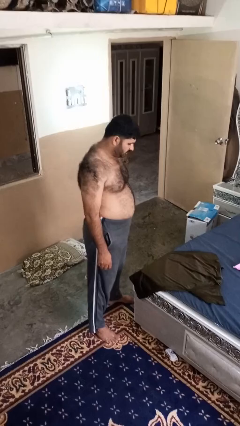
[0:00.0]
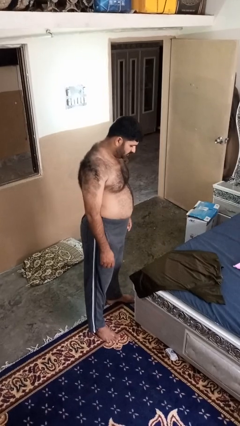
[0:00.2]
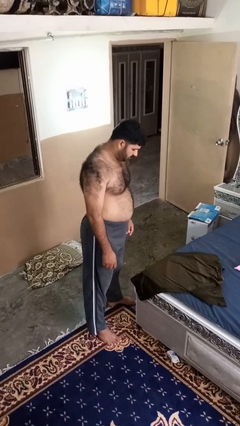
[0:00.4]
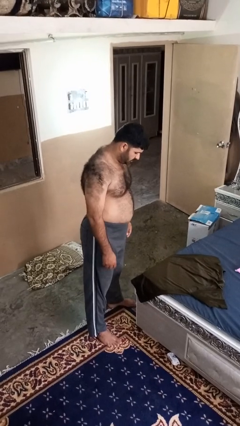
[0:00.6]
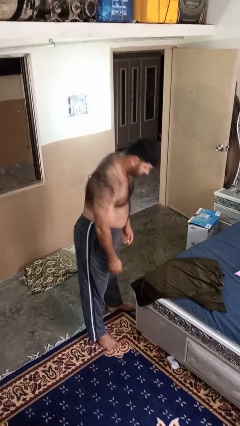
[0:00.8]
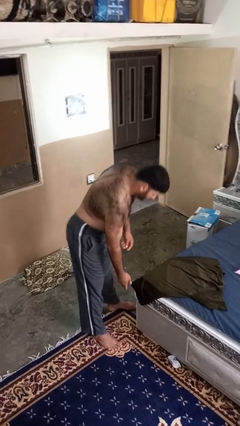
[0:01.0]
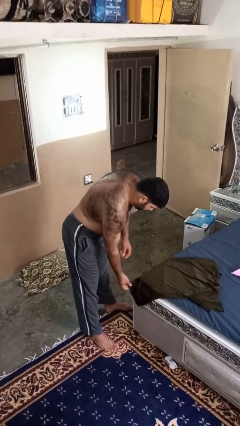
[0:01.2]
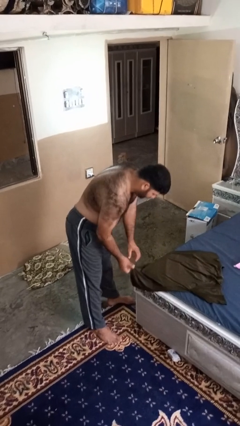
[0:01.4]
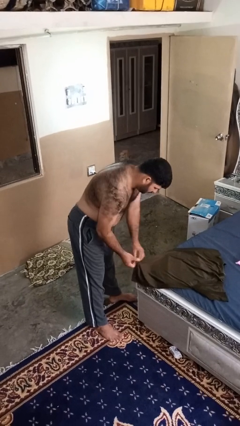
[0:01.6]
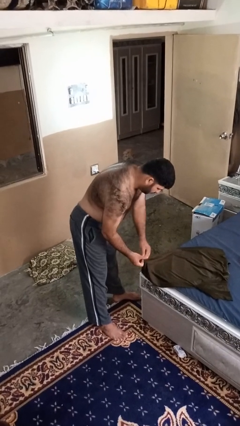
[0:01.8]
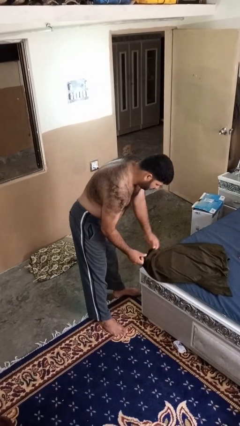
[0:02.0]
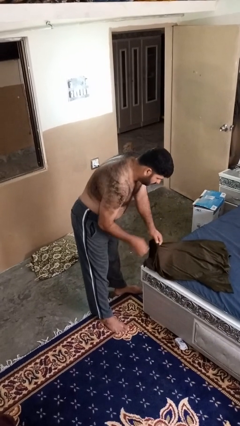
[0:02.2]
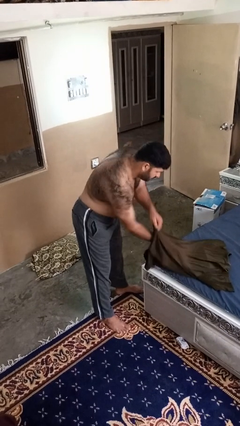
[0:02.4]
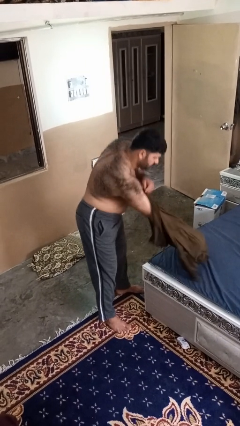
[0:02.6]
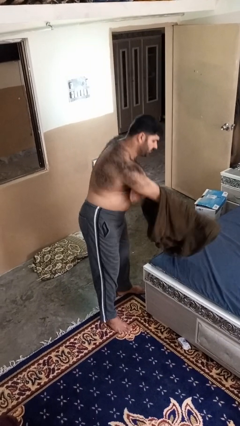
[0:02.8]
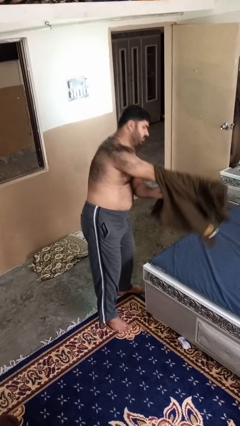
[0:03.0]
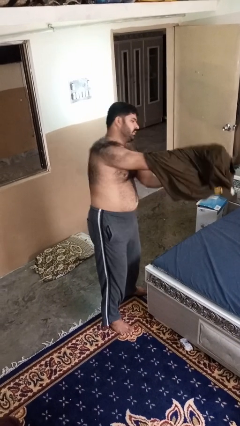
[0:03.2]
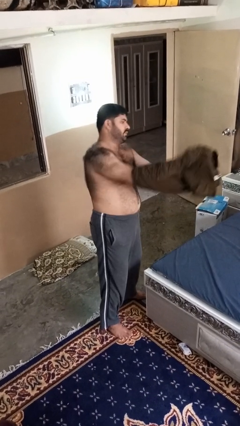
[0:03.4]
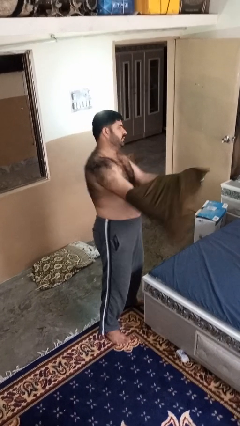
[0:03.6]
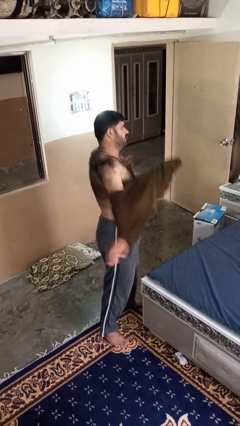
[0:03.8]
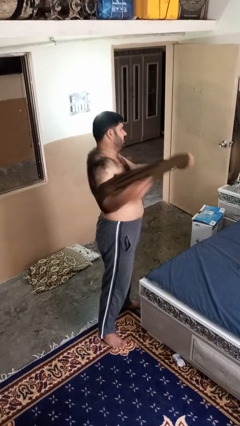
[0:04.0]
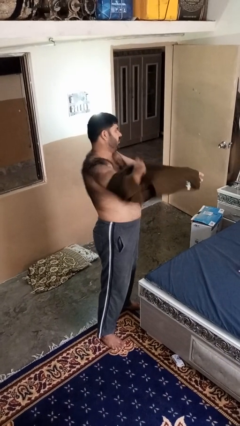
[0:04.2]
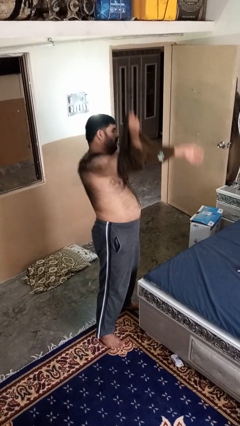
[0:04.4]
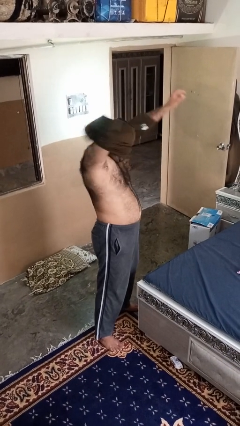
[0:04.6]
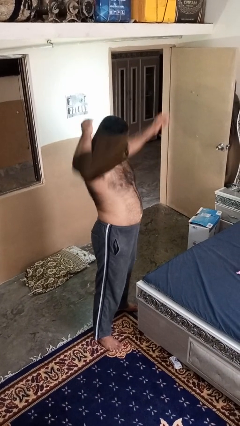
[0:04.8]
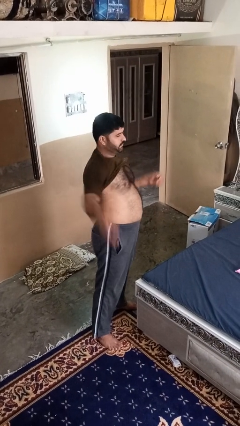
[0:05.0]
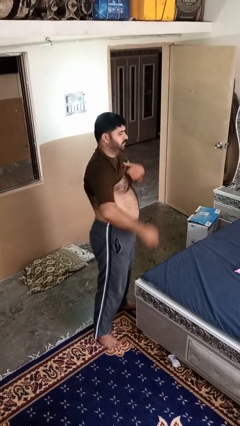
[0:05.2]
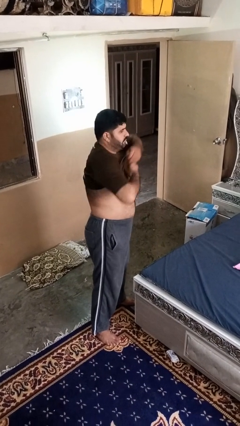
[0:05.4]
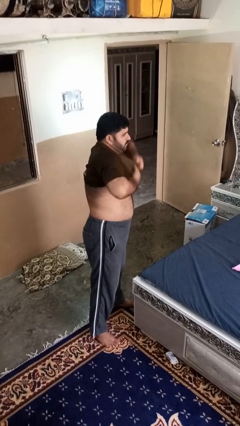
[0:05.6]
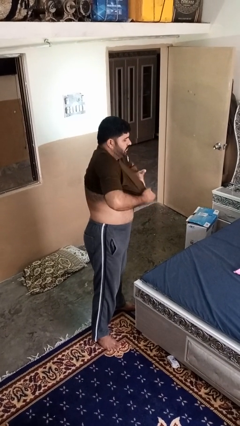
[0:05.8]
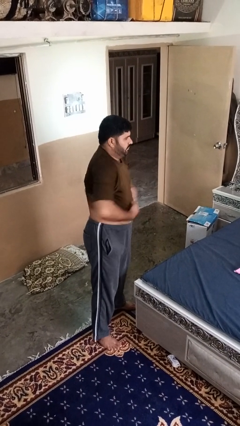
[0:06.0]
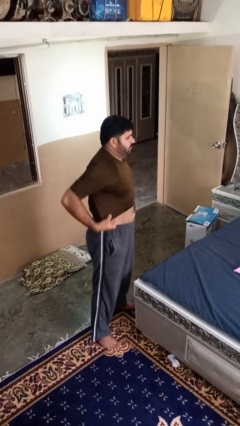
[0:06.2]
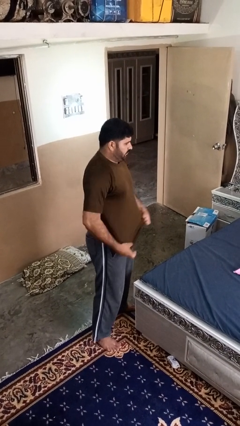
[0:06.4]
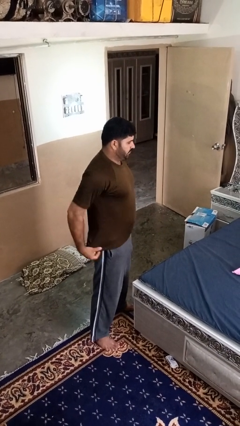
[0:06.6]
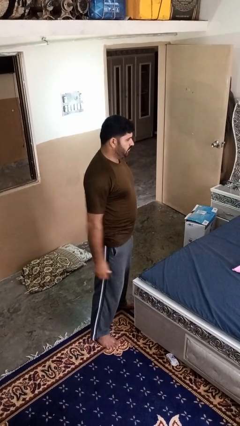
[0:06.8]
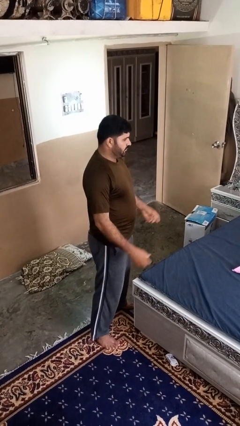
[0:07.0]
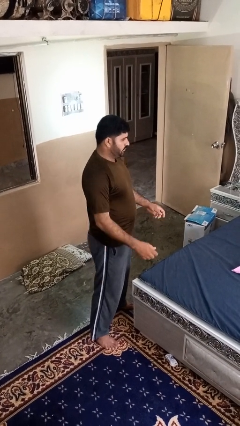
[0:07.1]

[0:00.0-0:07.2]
person puts on shirt

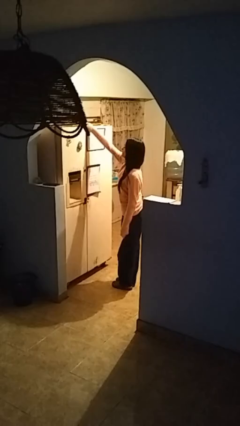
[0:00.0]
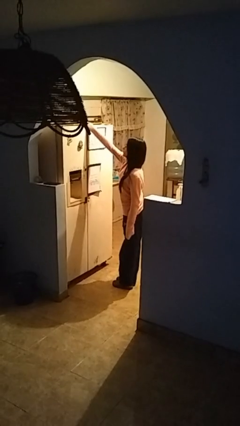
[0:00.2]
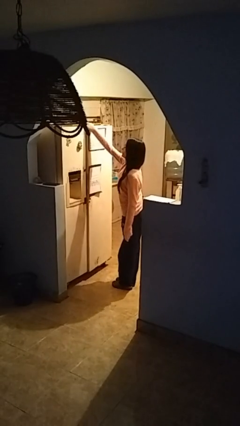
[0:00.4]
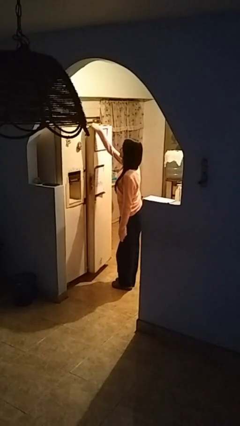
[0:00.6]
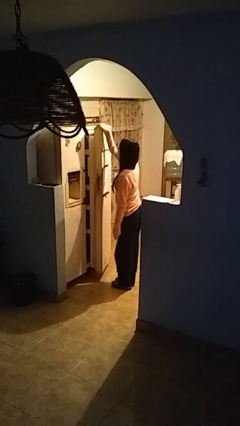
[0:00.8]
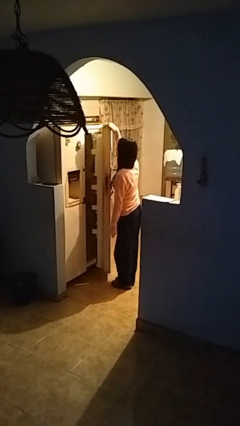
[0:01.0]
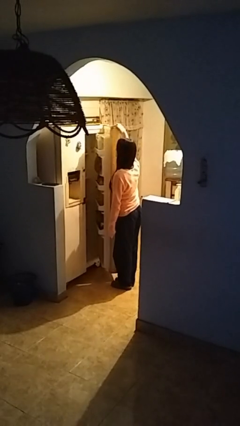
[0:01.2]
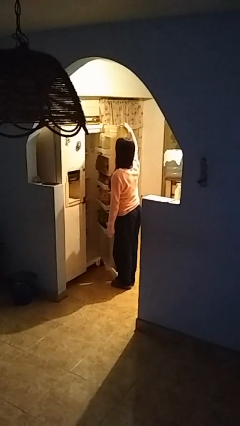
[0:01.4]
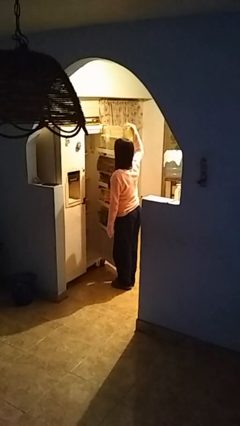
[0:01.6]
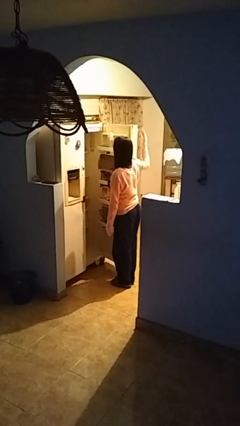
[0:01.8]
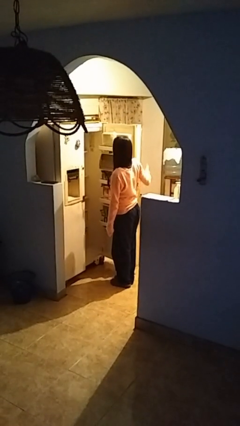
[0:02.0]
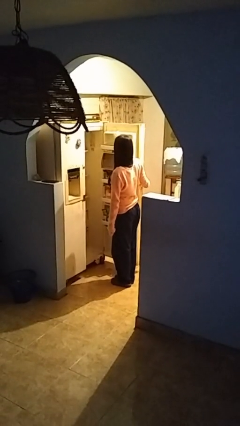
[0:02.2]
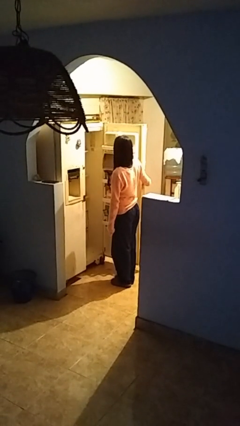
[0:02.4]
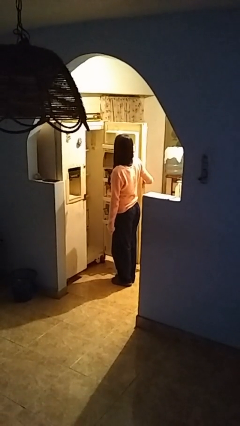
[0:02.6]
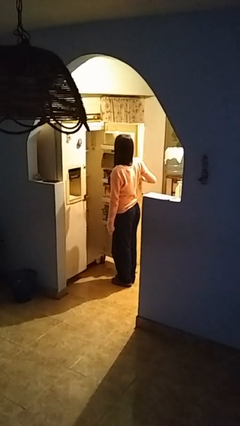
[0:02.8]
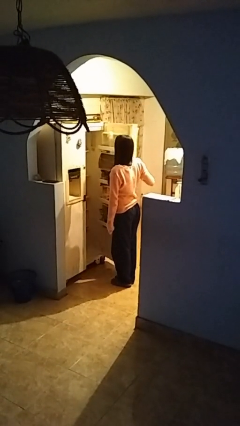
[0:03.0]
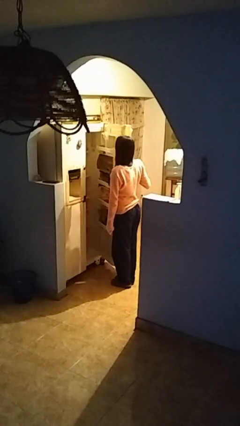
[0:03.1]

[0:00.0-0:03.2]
person opens refrigerator

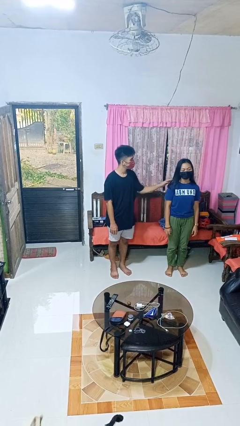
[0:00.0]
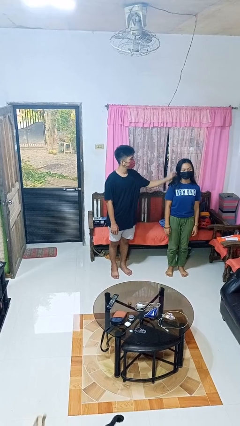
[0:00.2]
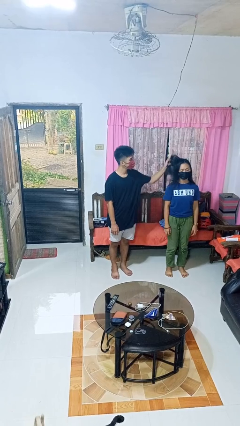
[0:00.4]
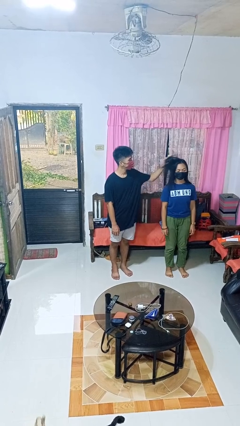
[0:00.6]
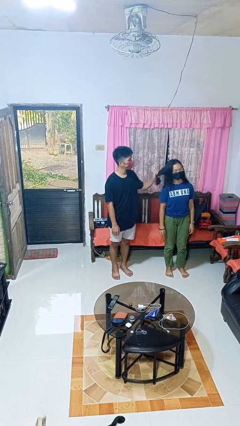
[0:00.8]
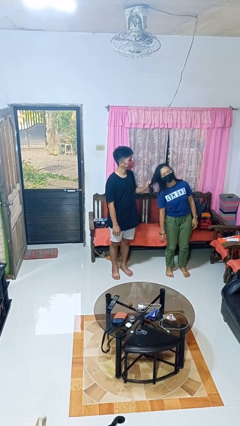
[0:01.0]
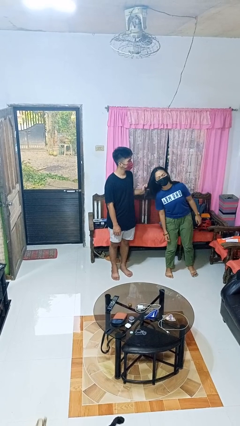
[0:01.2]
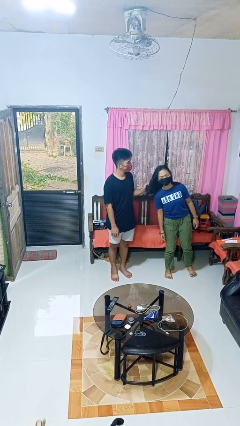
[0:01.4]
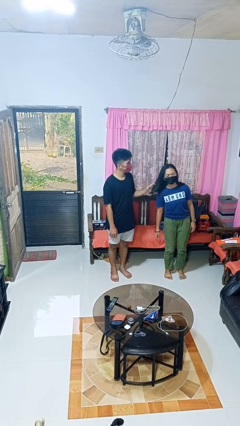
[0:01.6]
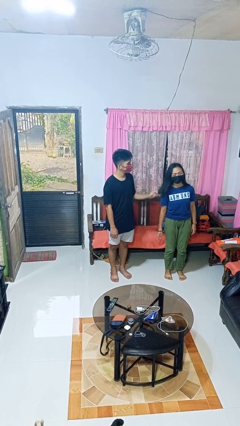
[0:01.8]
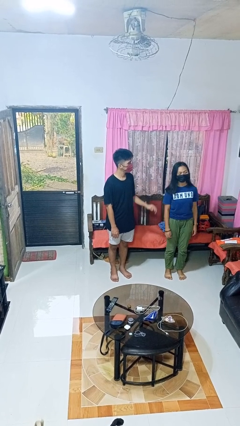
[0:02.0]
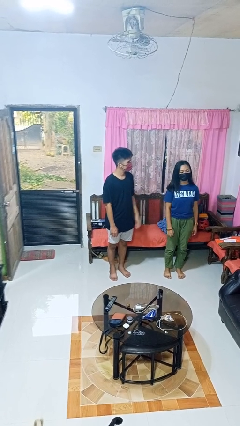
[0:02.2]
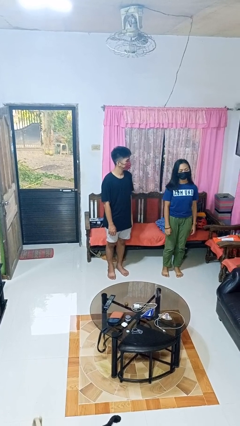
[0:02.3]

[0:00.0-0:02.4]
person grabs person by hair

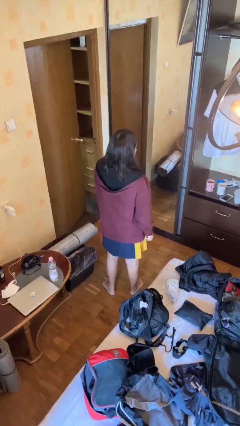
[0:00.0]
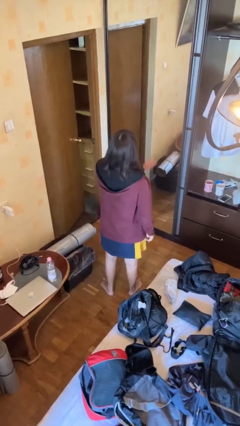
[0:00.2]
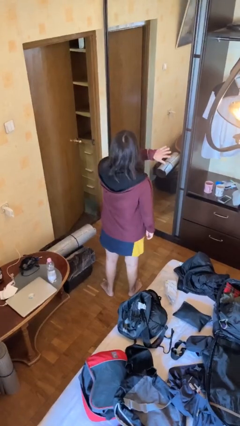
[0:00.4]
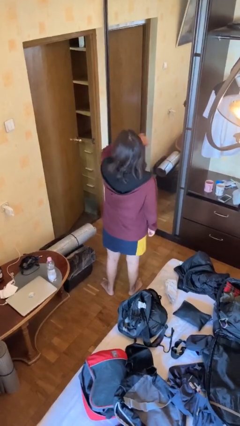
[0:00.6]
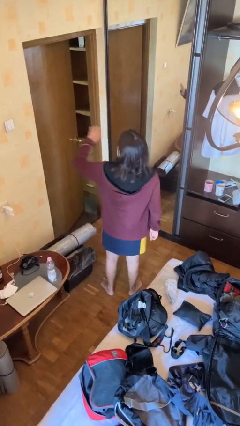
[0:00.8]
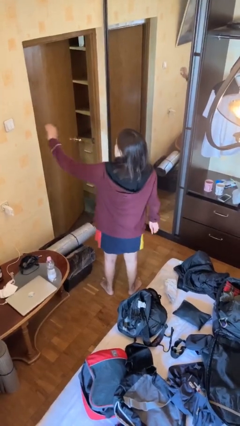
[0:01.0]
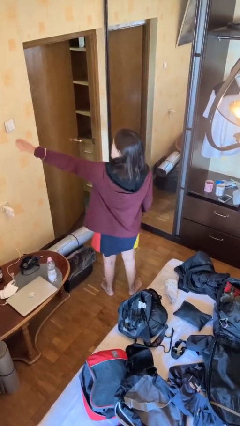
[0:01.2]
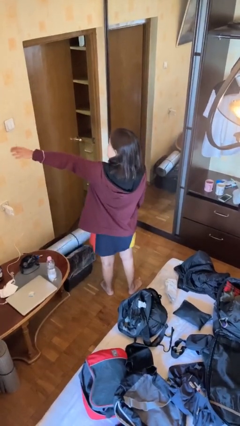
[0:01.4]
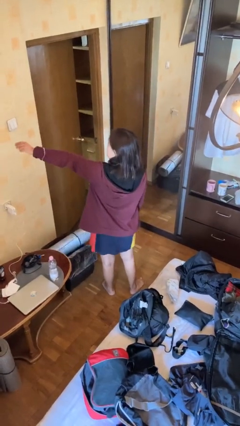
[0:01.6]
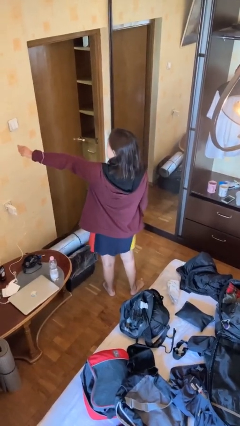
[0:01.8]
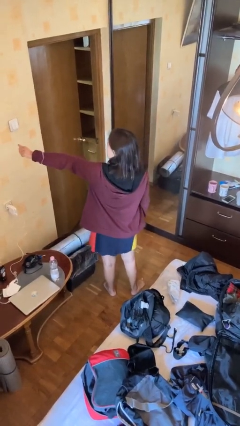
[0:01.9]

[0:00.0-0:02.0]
person gestures swipe left

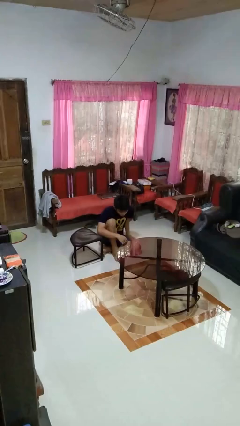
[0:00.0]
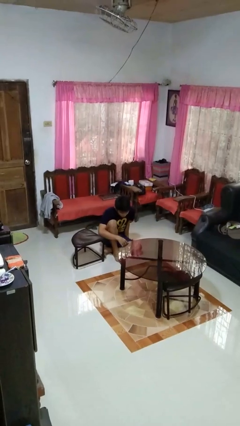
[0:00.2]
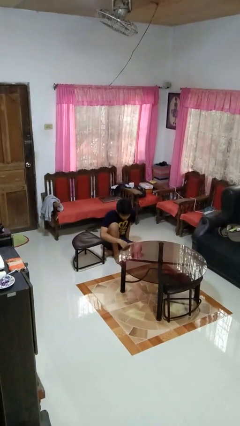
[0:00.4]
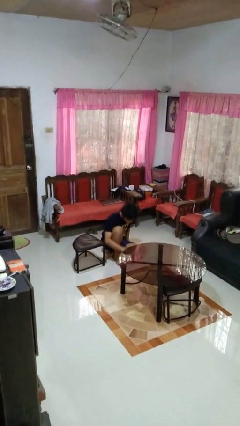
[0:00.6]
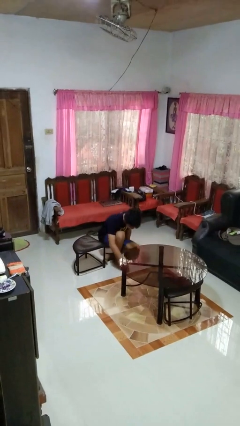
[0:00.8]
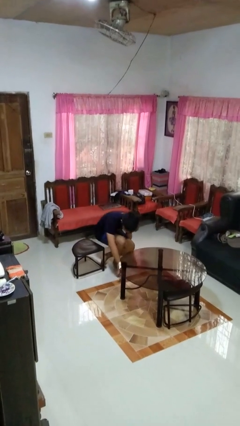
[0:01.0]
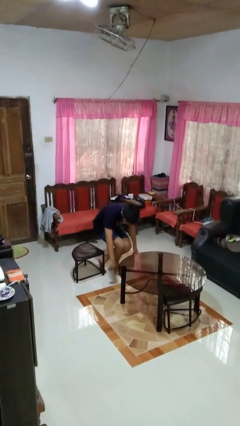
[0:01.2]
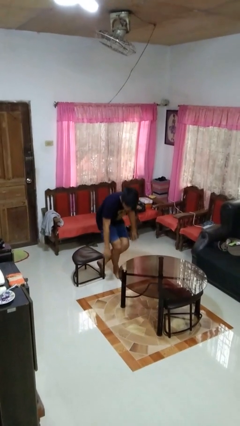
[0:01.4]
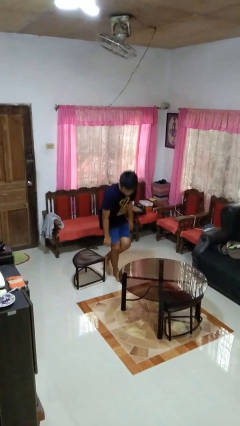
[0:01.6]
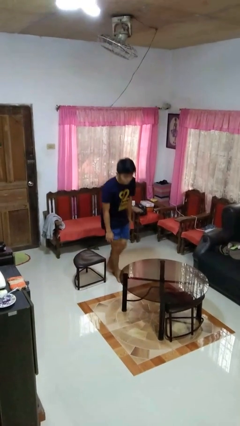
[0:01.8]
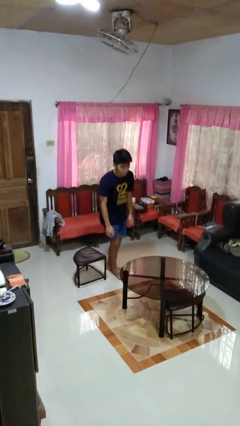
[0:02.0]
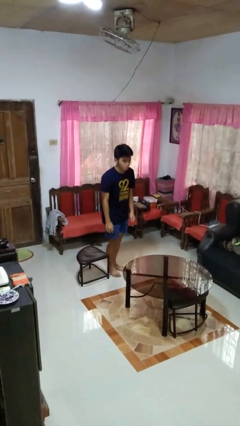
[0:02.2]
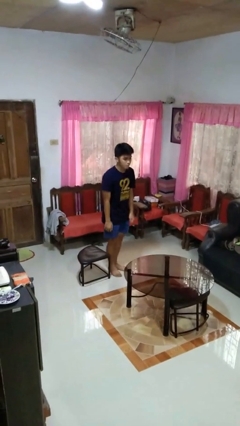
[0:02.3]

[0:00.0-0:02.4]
person stands up from floor
